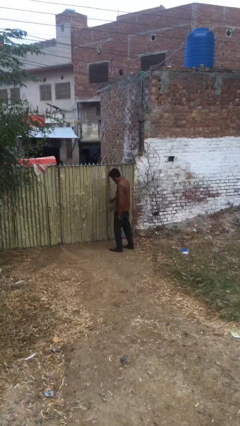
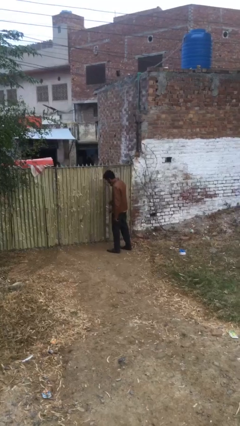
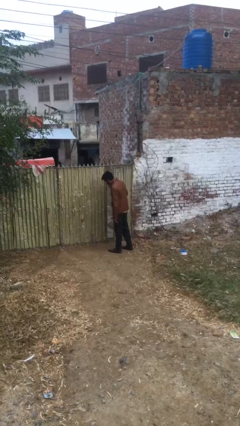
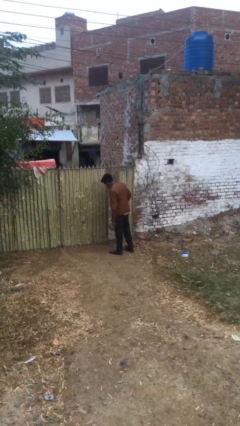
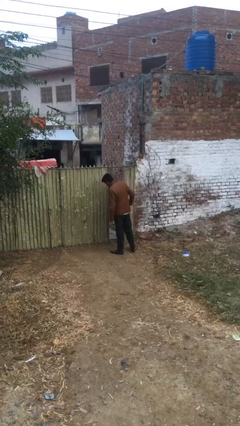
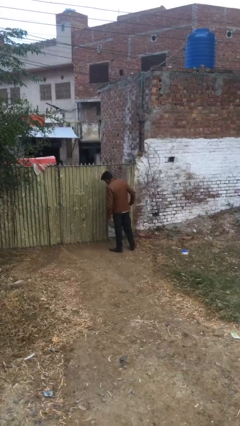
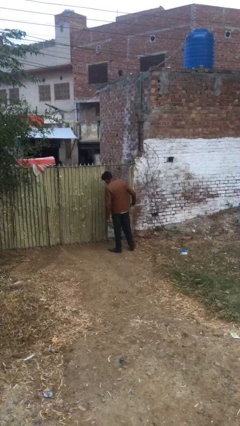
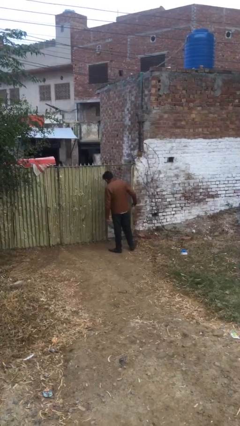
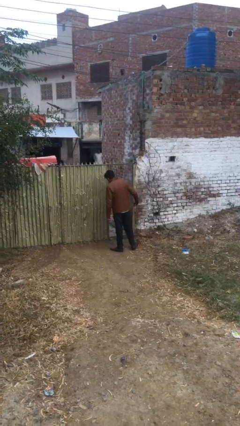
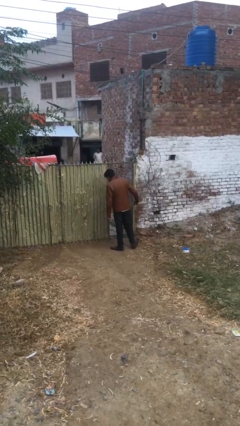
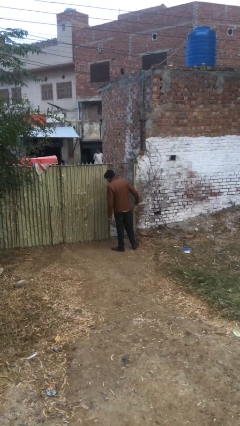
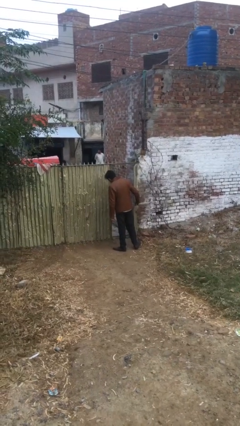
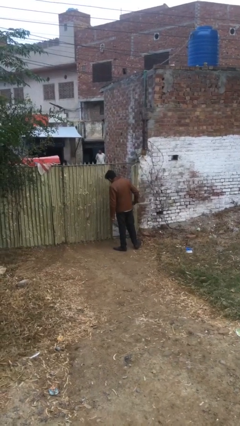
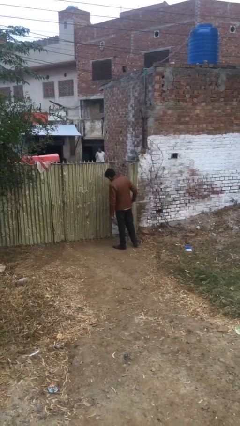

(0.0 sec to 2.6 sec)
person opens facility door

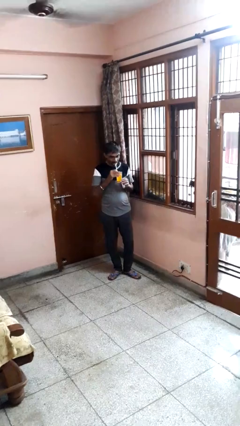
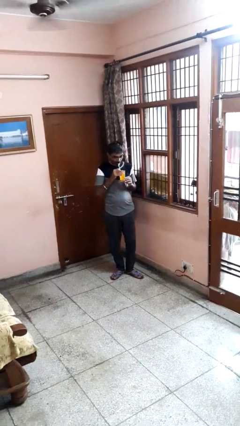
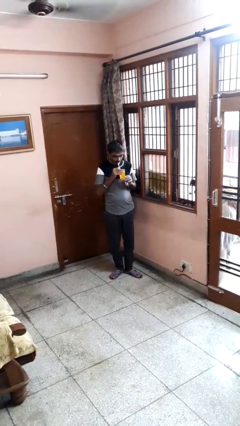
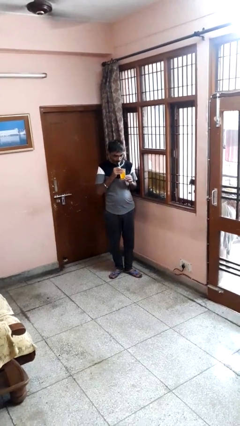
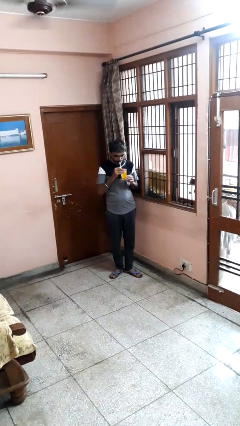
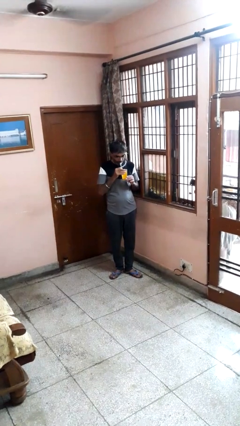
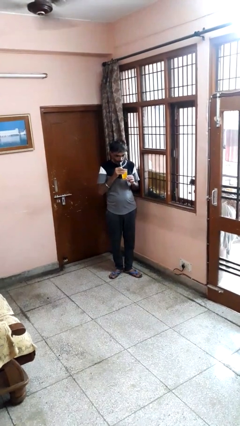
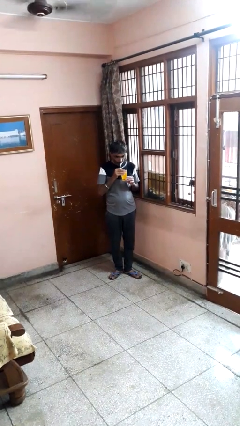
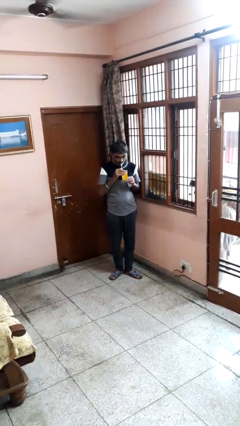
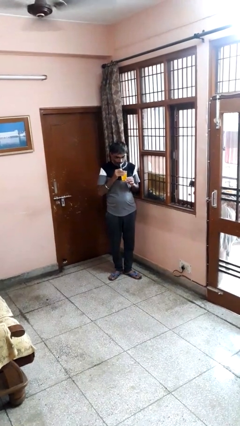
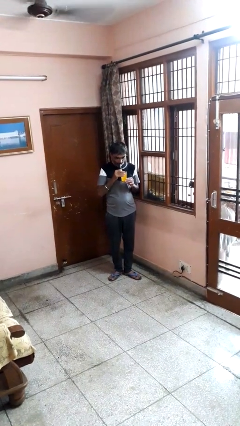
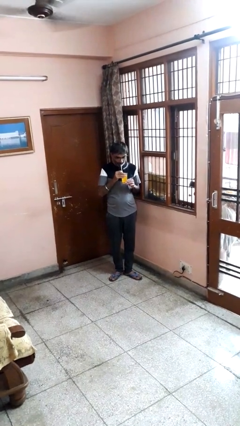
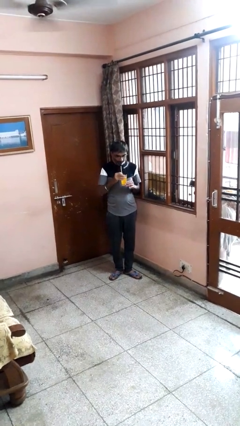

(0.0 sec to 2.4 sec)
person drinks from straw

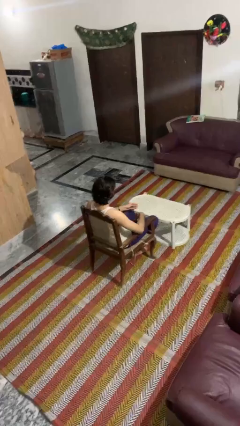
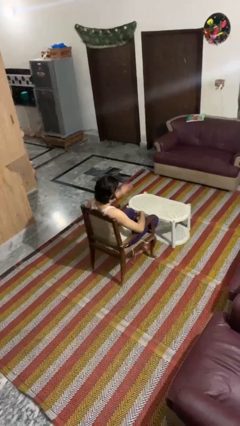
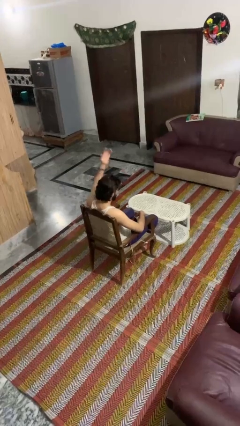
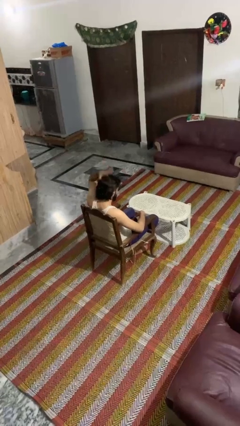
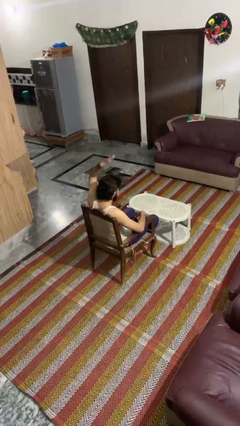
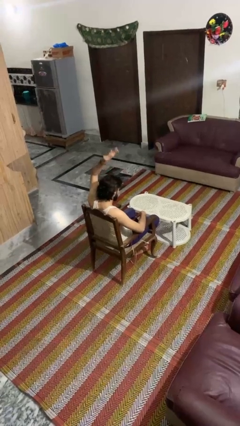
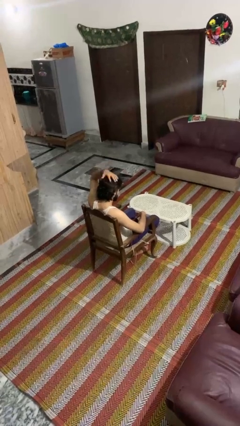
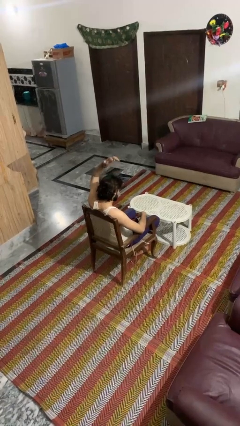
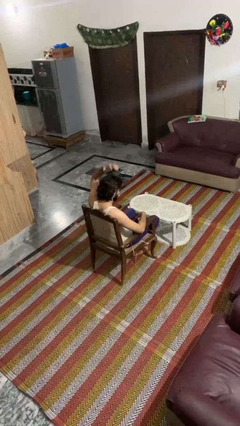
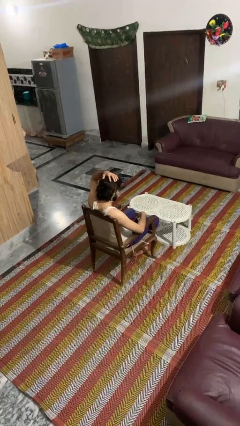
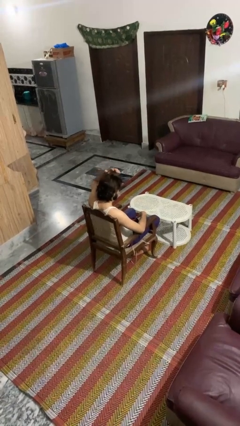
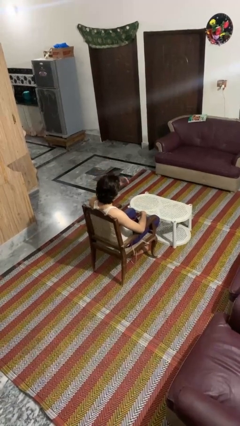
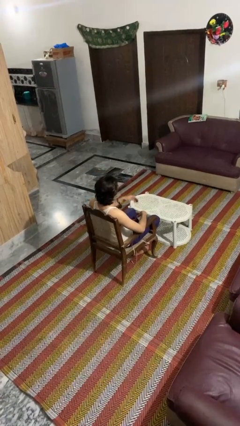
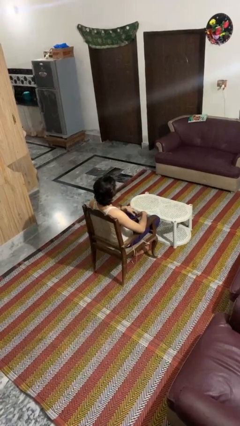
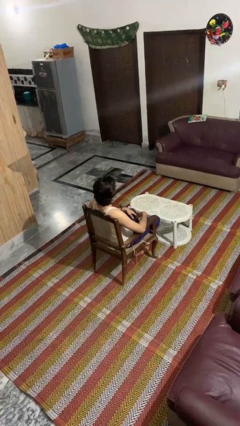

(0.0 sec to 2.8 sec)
person pats head

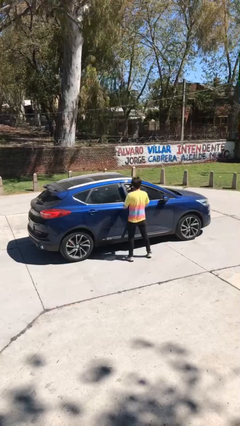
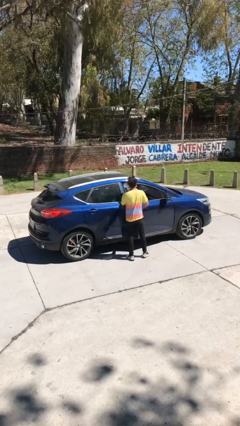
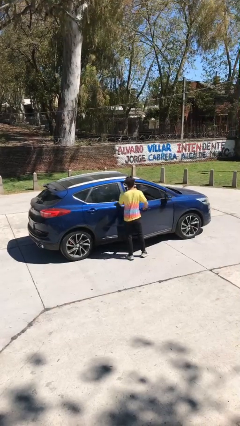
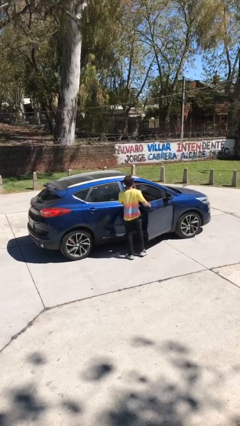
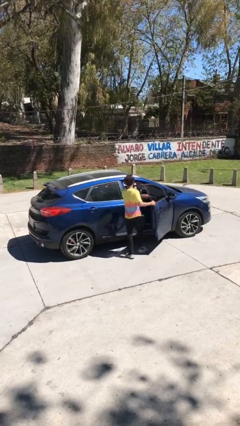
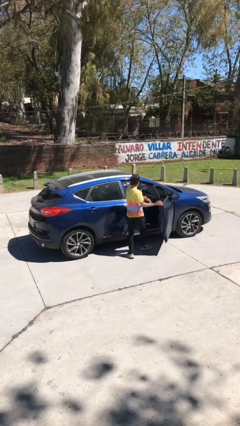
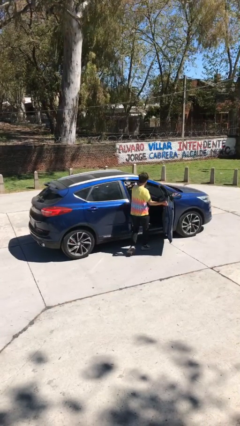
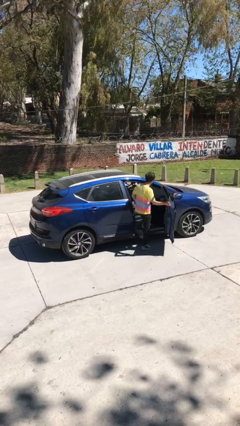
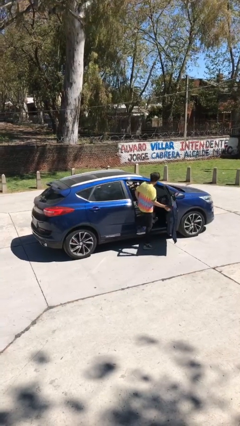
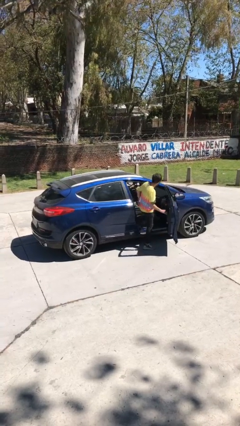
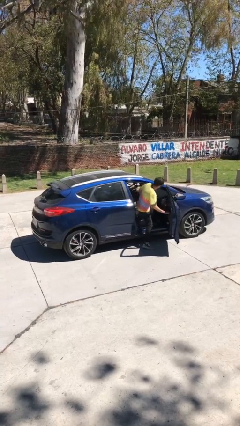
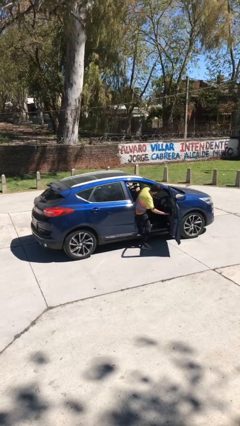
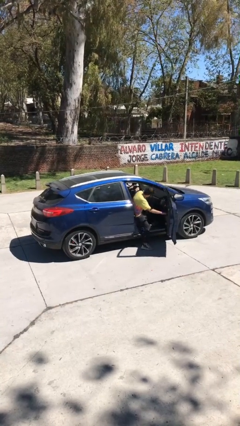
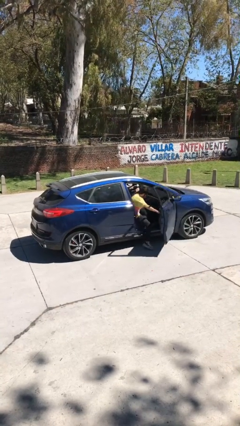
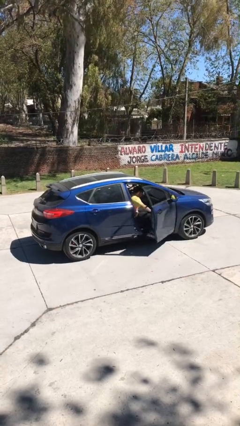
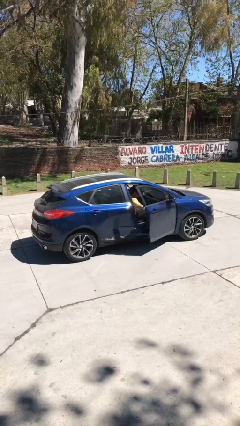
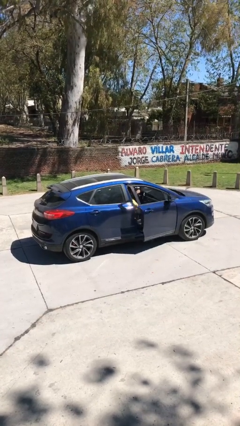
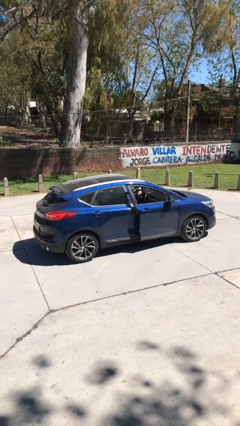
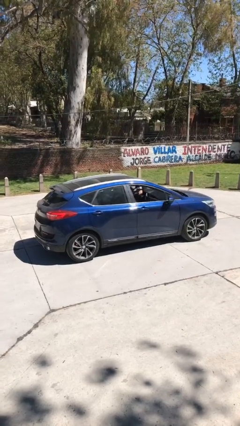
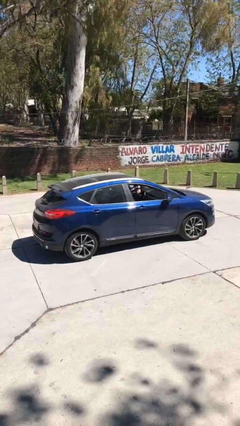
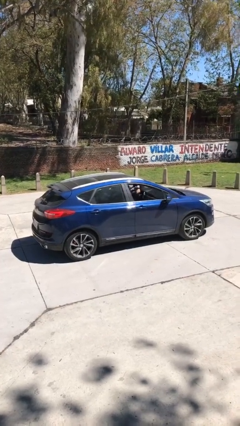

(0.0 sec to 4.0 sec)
car picks up person

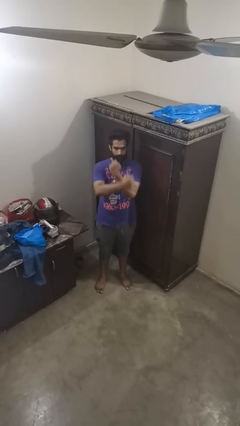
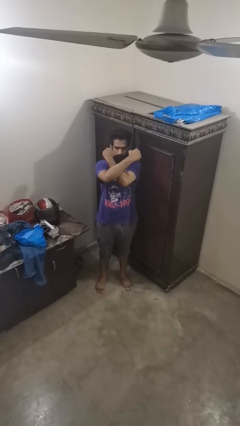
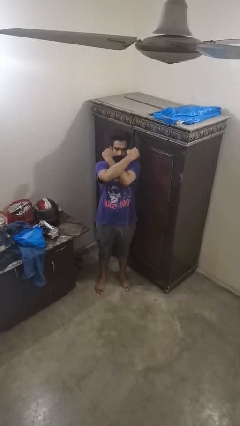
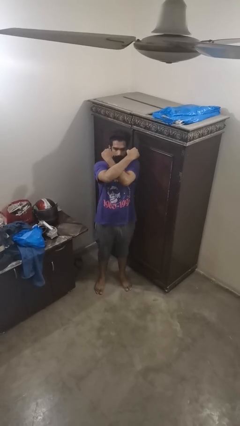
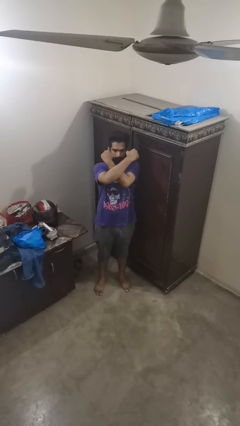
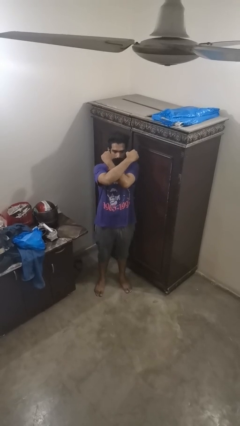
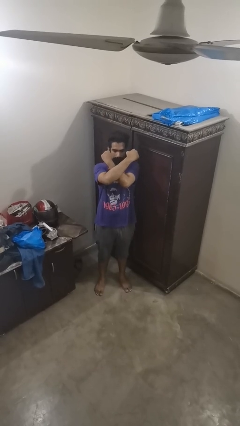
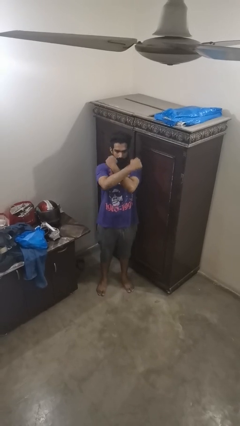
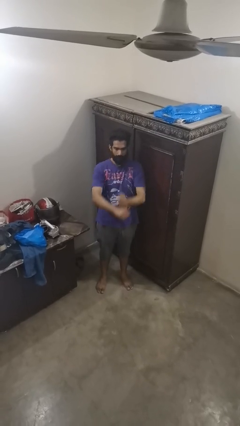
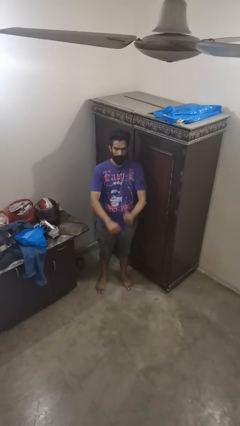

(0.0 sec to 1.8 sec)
person gestures arms x

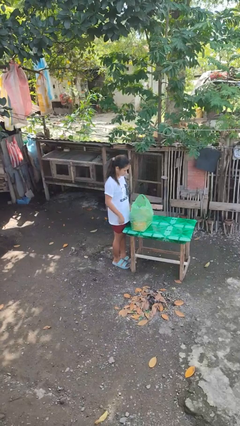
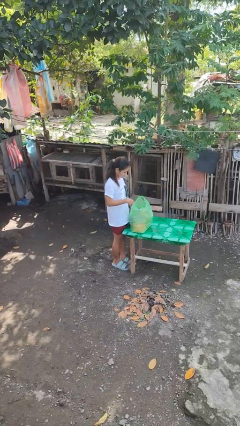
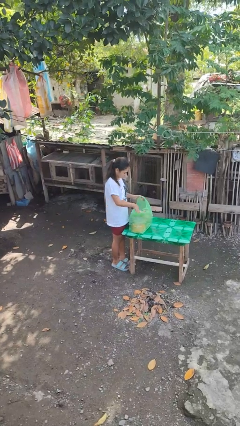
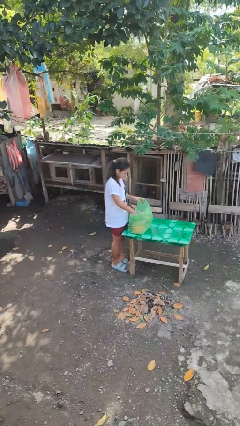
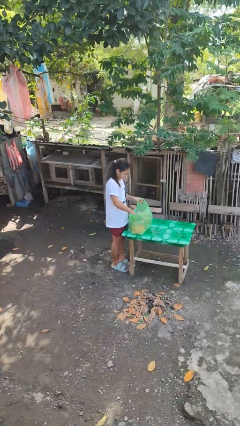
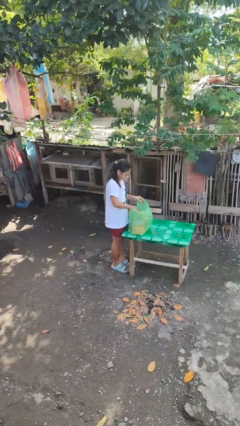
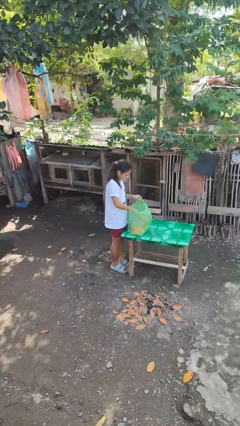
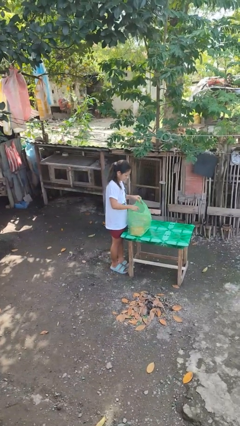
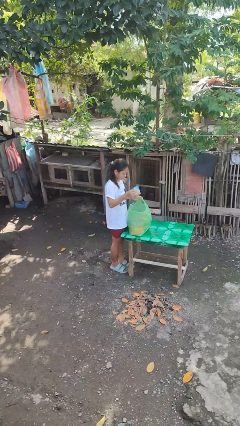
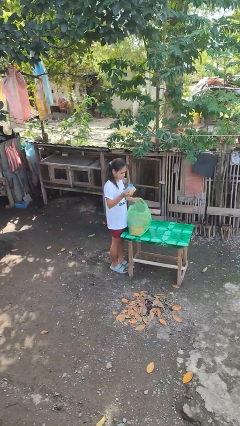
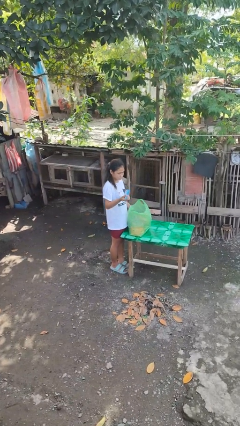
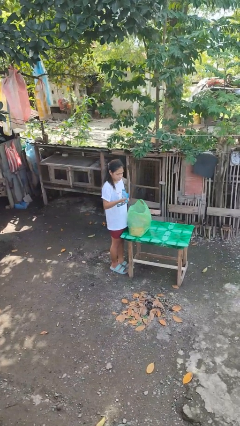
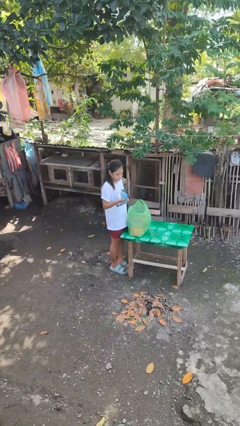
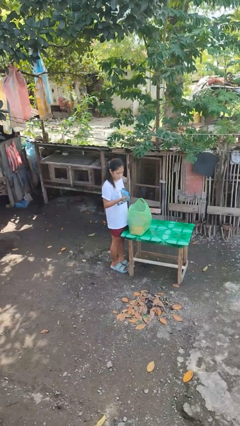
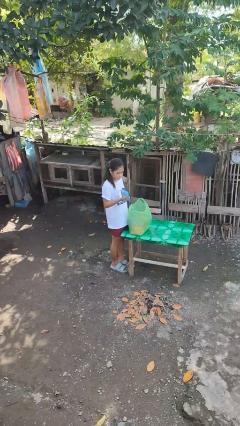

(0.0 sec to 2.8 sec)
person takes object from bag

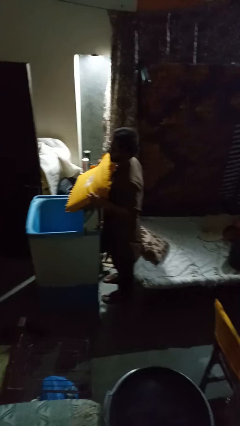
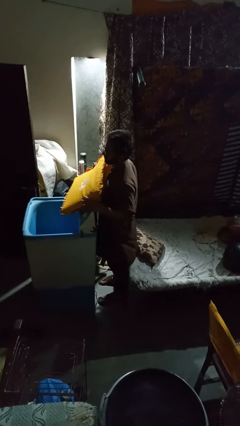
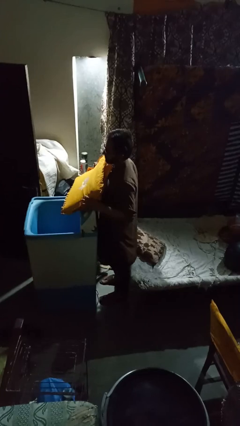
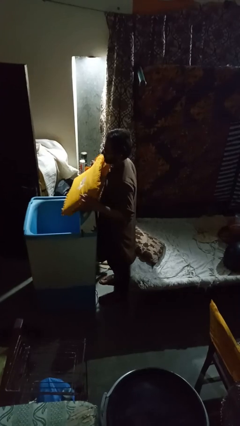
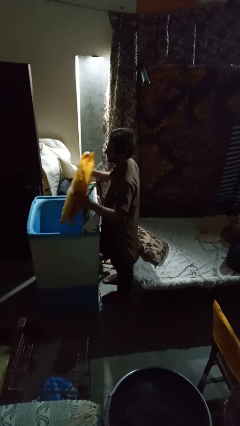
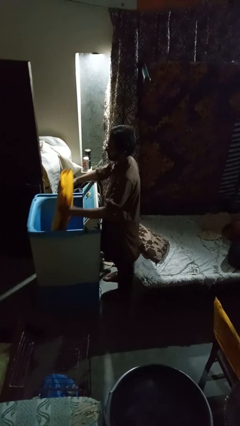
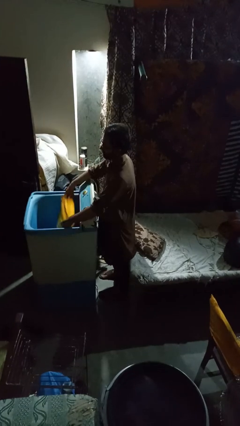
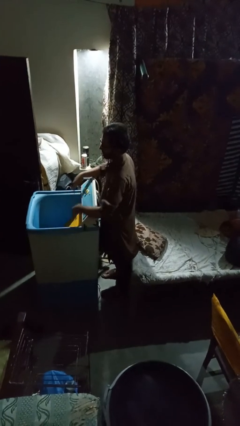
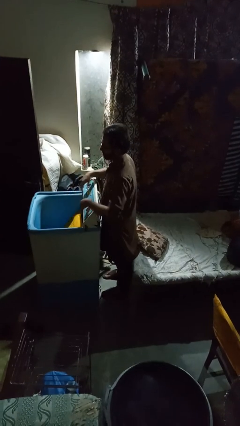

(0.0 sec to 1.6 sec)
person loads clotheswasher
